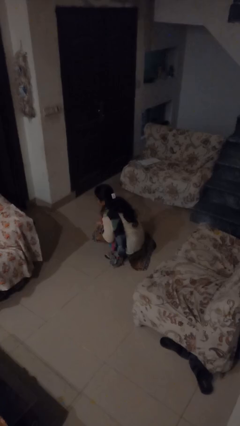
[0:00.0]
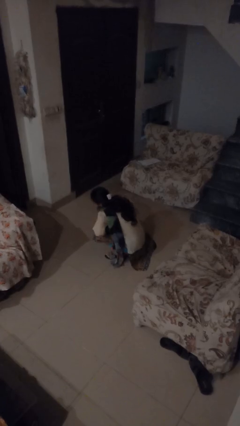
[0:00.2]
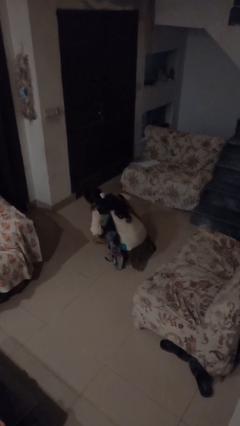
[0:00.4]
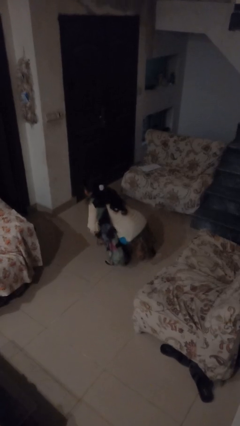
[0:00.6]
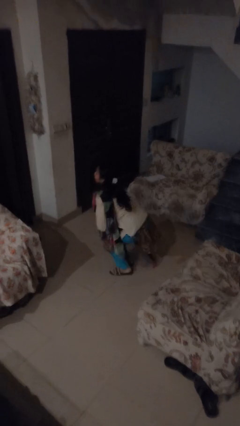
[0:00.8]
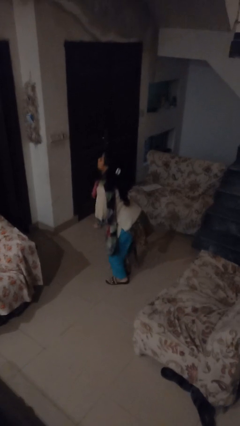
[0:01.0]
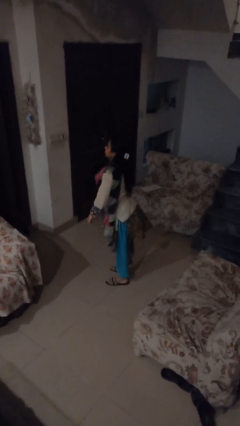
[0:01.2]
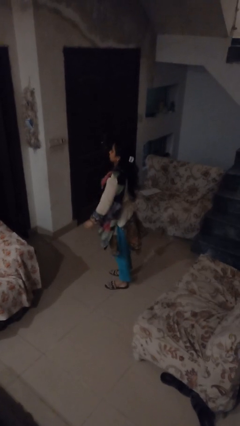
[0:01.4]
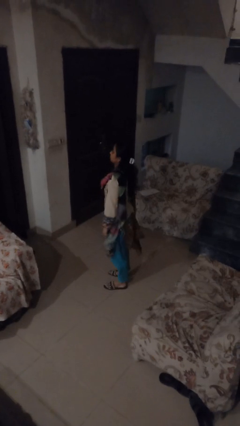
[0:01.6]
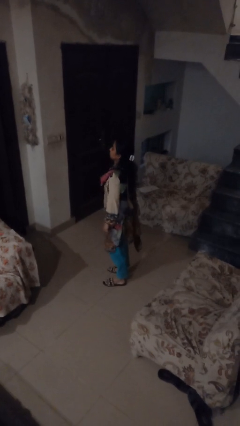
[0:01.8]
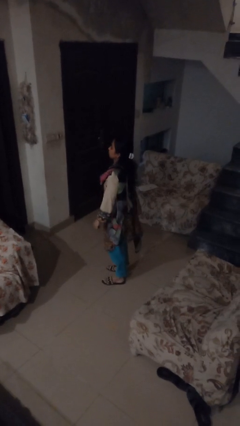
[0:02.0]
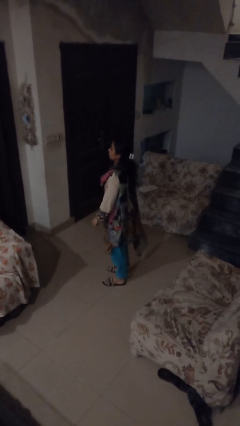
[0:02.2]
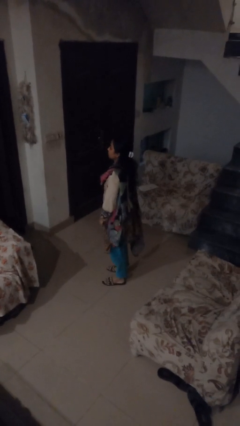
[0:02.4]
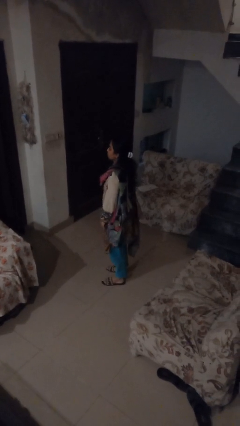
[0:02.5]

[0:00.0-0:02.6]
person stands up

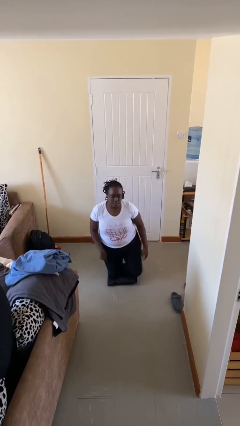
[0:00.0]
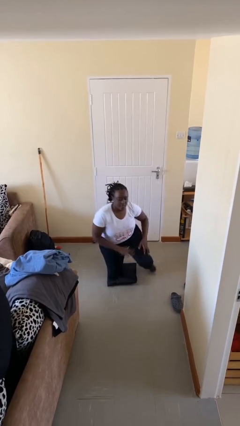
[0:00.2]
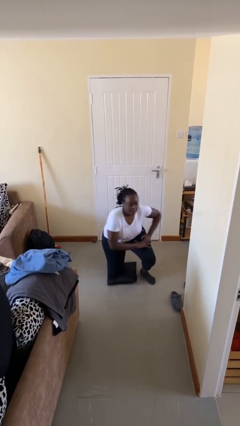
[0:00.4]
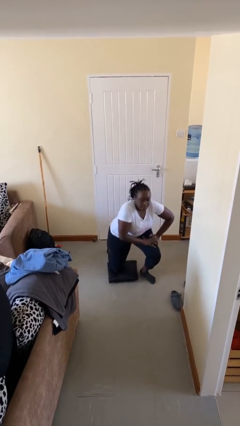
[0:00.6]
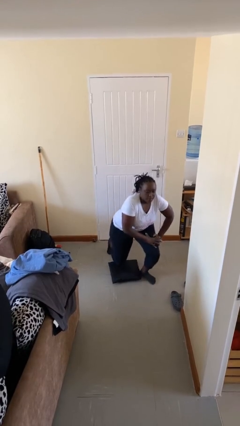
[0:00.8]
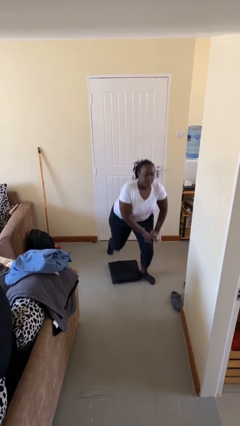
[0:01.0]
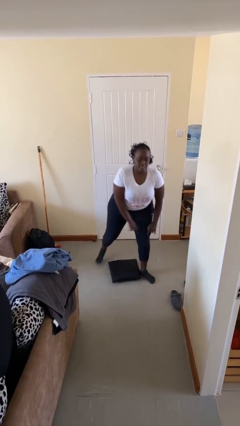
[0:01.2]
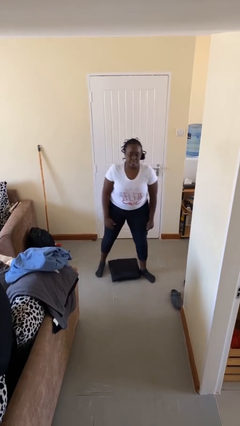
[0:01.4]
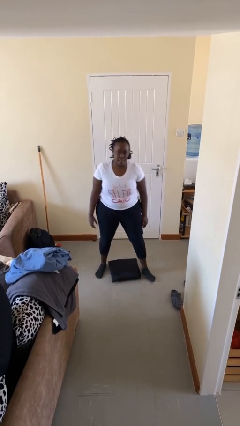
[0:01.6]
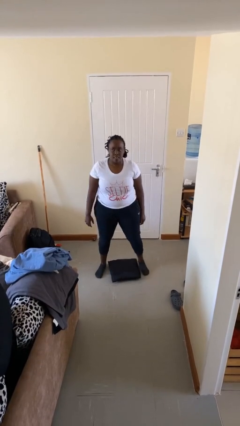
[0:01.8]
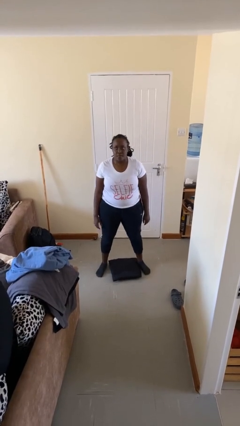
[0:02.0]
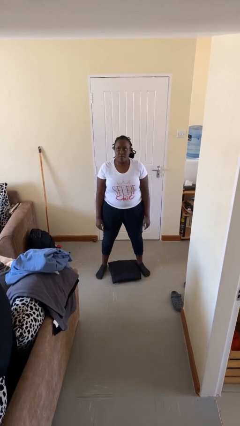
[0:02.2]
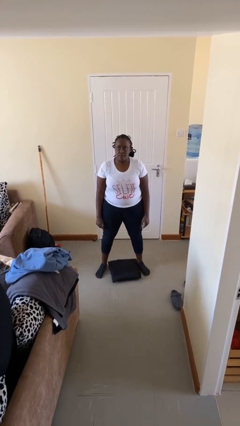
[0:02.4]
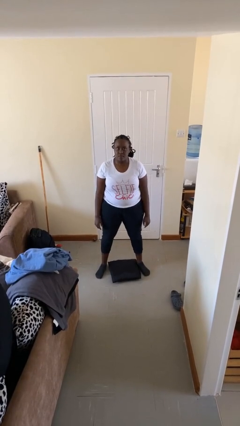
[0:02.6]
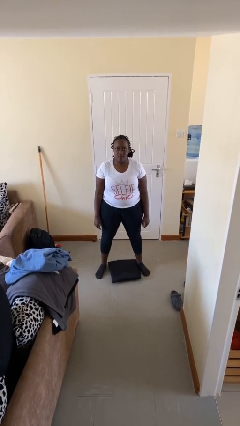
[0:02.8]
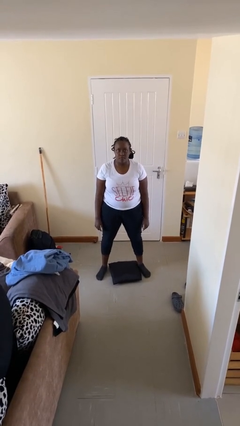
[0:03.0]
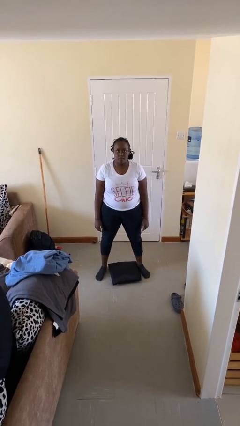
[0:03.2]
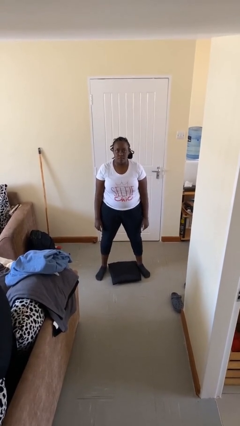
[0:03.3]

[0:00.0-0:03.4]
person stands up from floor

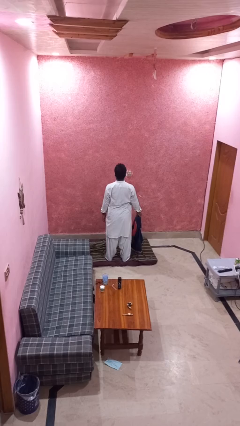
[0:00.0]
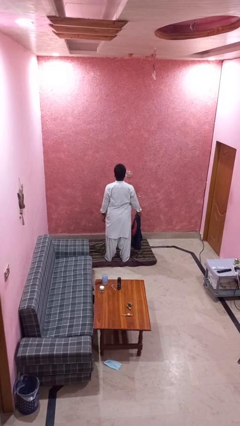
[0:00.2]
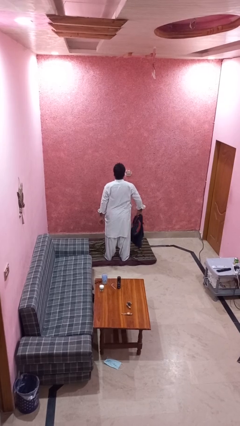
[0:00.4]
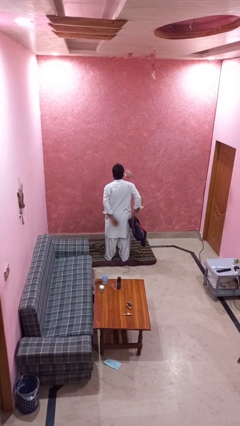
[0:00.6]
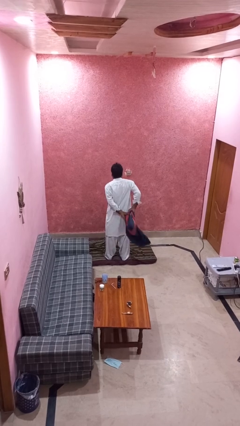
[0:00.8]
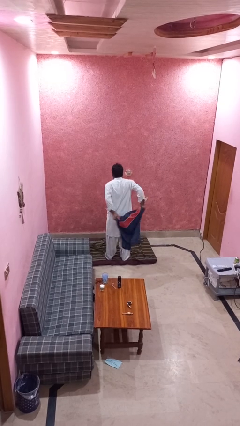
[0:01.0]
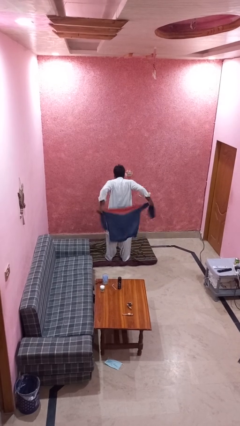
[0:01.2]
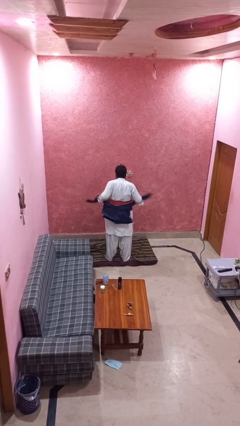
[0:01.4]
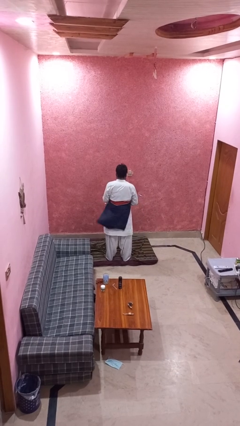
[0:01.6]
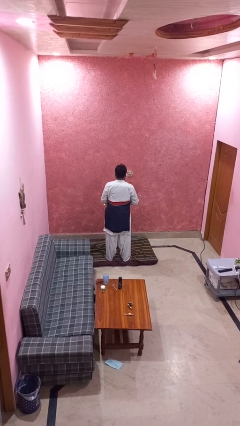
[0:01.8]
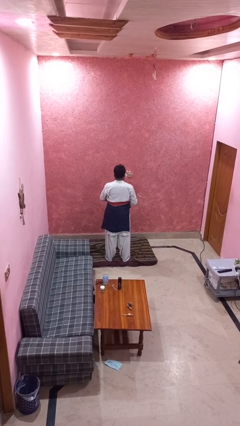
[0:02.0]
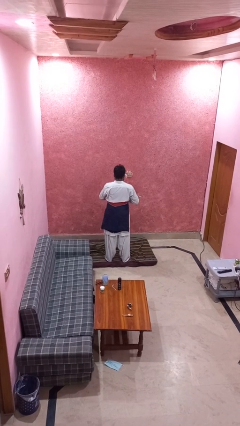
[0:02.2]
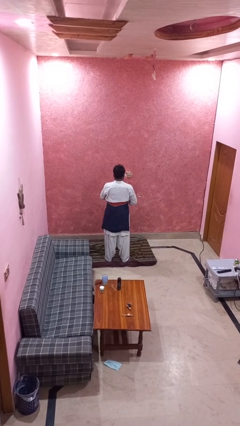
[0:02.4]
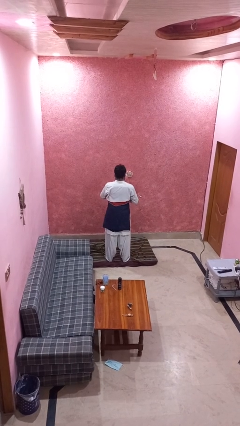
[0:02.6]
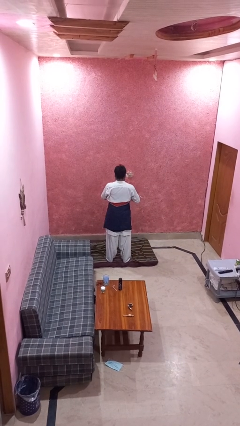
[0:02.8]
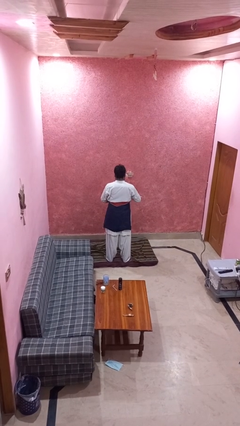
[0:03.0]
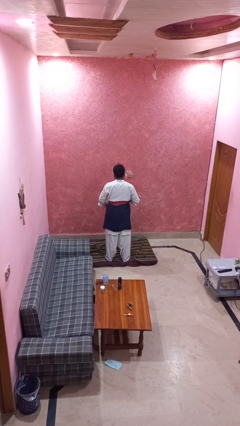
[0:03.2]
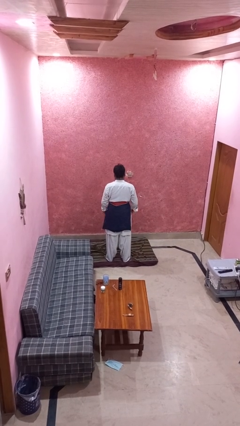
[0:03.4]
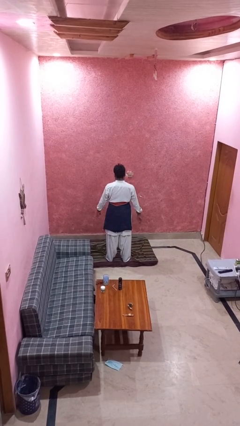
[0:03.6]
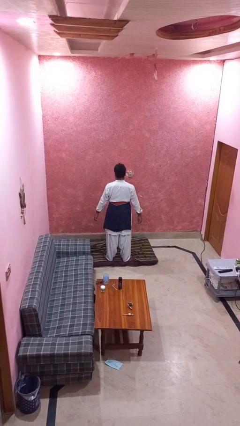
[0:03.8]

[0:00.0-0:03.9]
person ties jacket around waist

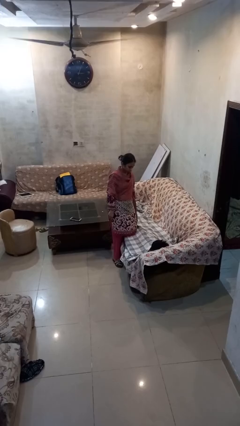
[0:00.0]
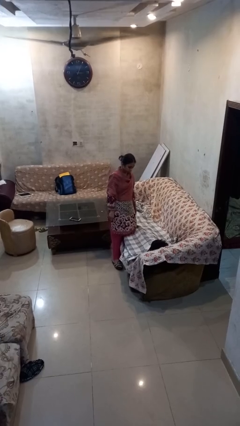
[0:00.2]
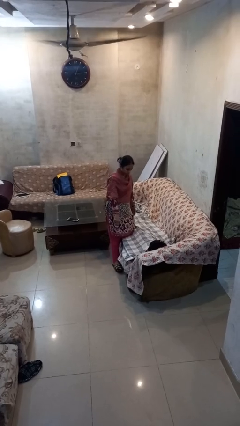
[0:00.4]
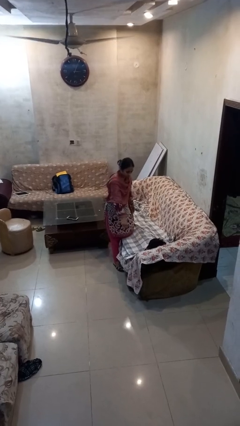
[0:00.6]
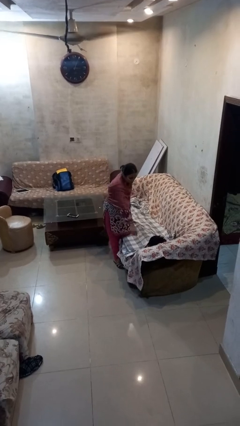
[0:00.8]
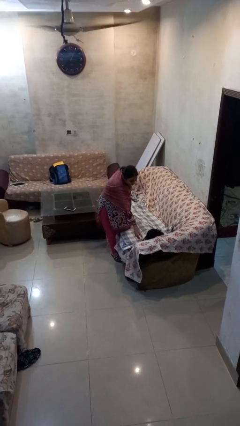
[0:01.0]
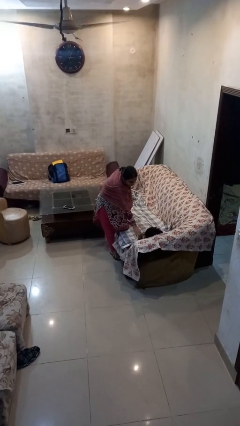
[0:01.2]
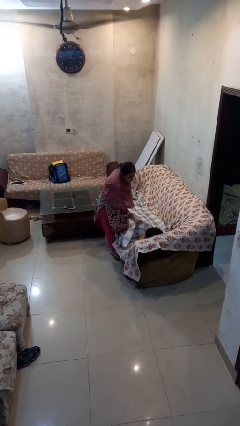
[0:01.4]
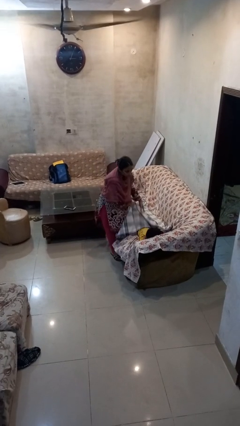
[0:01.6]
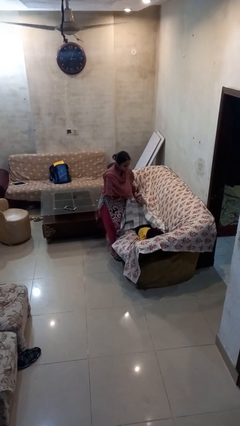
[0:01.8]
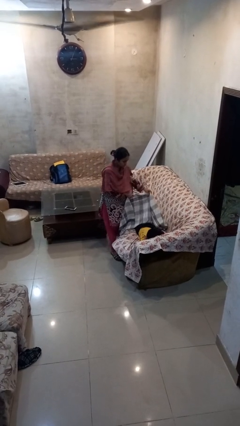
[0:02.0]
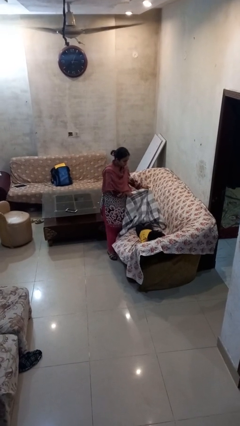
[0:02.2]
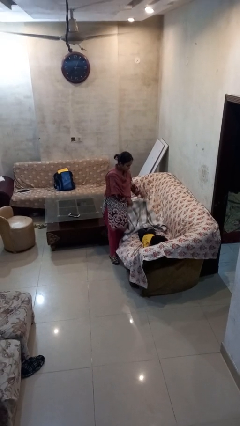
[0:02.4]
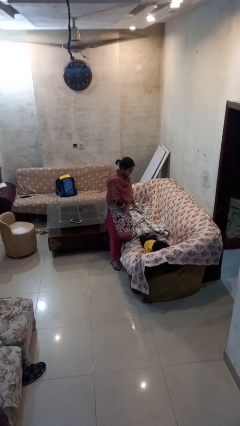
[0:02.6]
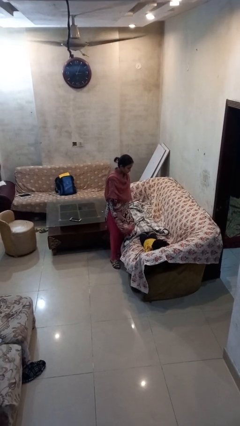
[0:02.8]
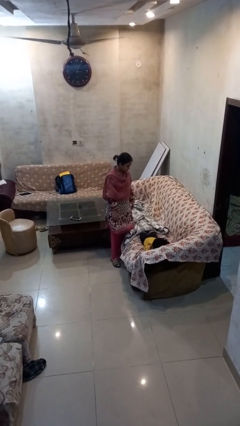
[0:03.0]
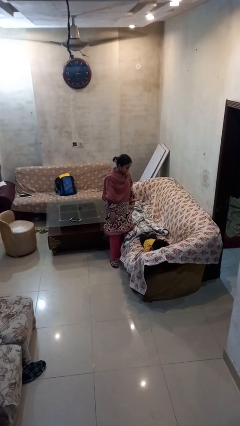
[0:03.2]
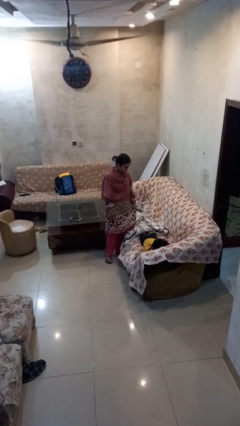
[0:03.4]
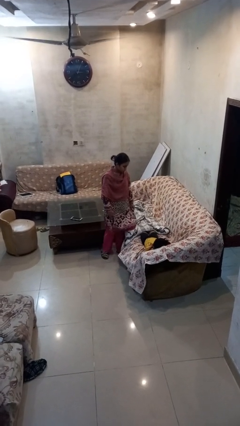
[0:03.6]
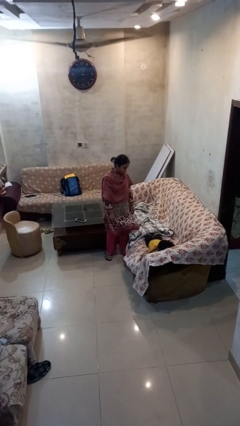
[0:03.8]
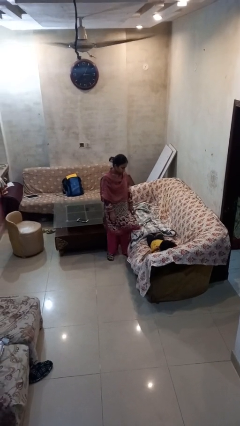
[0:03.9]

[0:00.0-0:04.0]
person uncovers friend with blanket

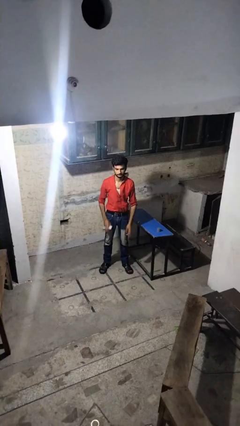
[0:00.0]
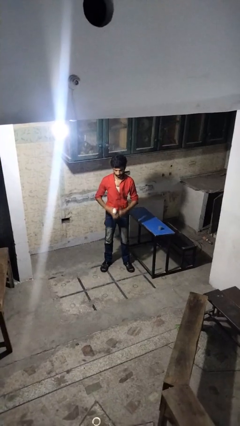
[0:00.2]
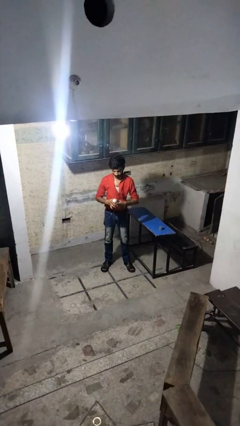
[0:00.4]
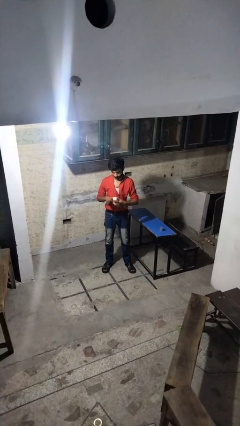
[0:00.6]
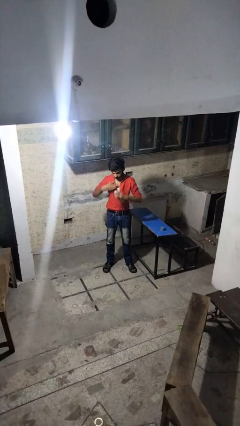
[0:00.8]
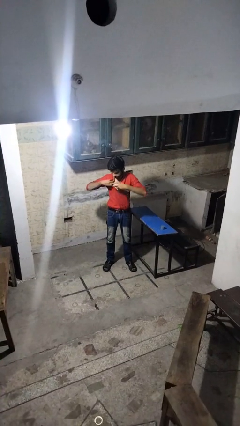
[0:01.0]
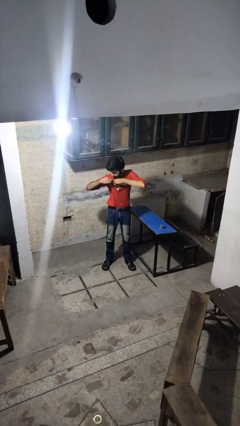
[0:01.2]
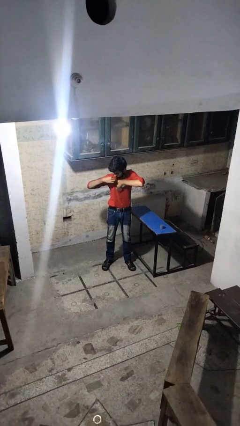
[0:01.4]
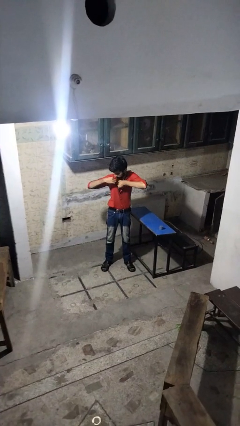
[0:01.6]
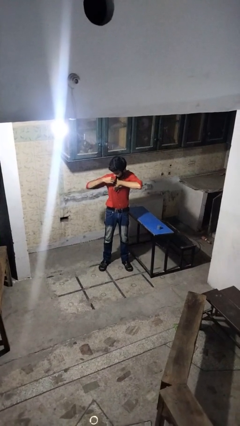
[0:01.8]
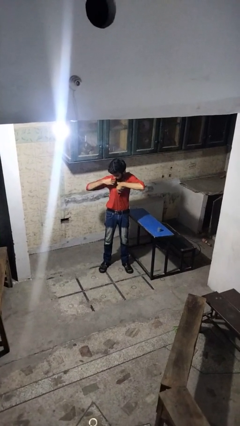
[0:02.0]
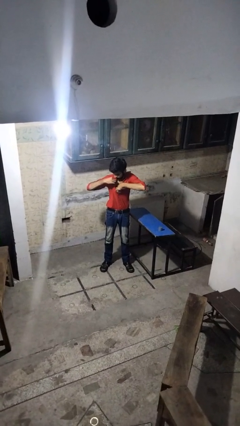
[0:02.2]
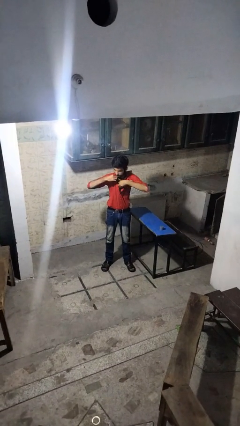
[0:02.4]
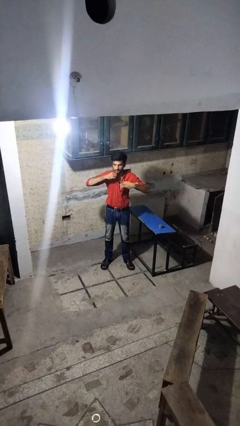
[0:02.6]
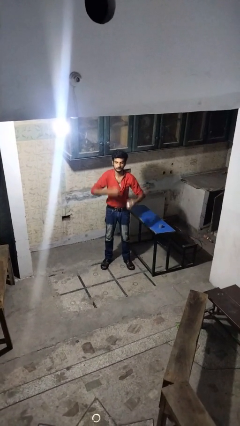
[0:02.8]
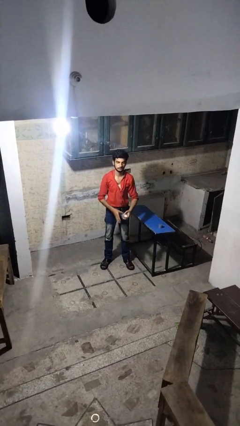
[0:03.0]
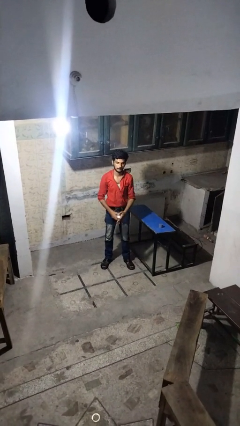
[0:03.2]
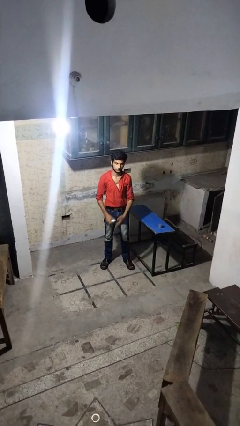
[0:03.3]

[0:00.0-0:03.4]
person applies deodorant

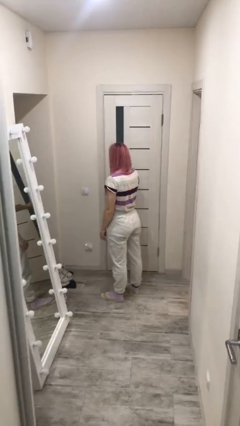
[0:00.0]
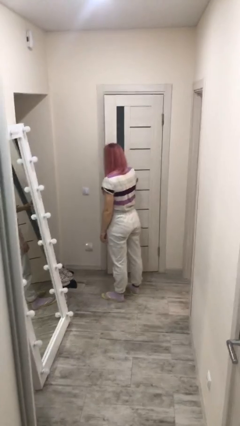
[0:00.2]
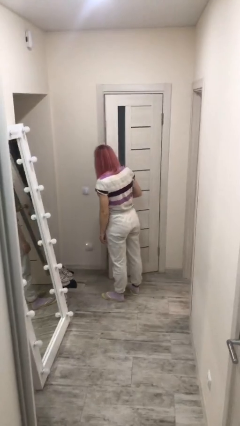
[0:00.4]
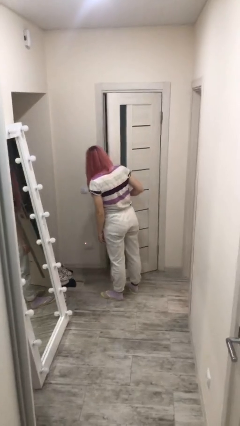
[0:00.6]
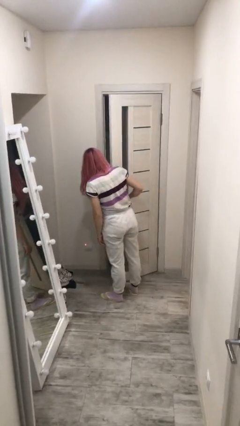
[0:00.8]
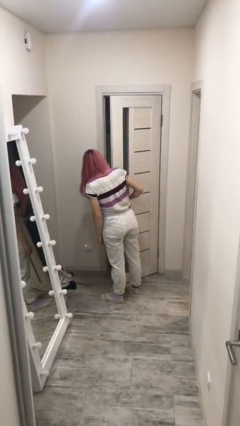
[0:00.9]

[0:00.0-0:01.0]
person opens facility door
